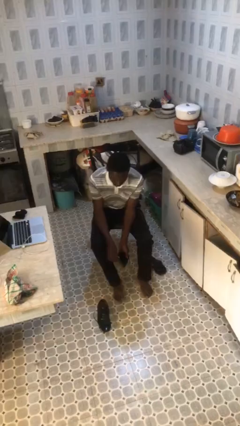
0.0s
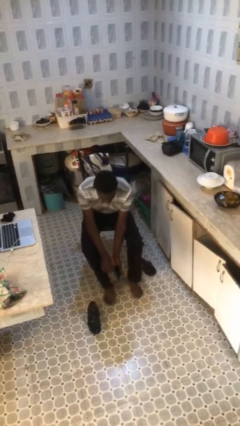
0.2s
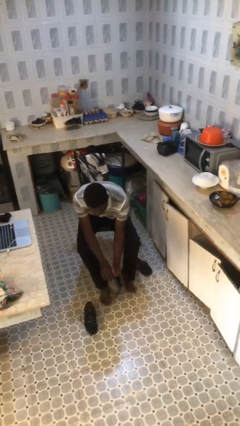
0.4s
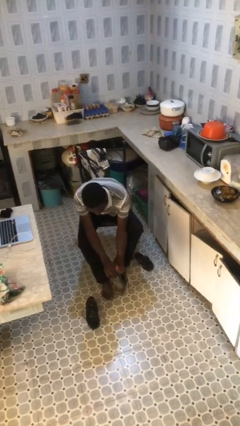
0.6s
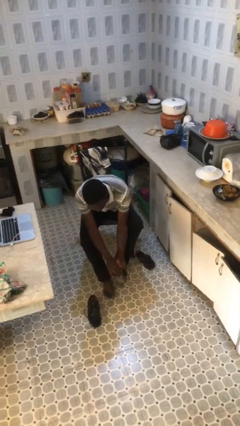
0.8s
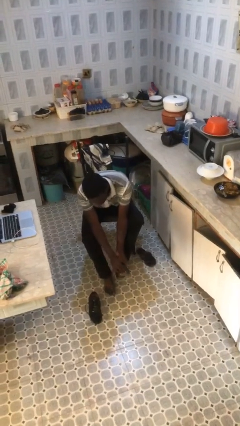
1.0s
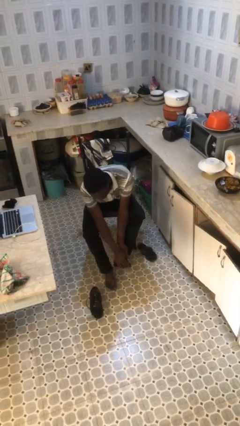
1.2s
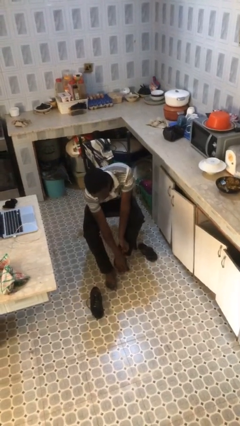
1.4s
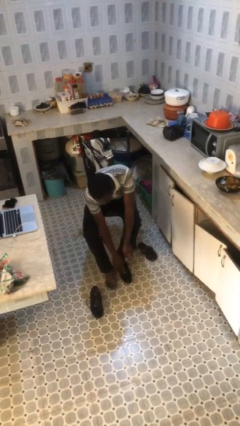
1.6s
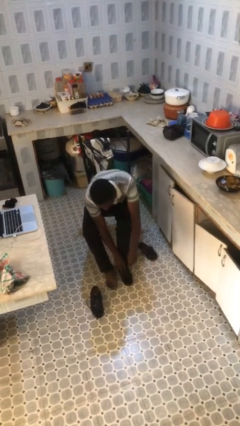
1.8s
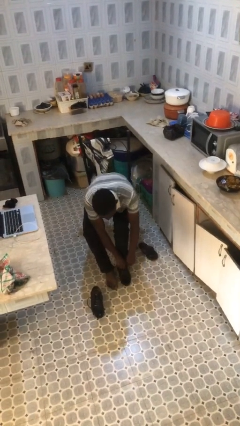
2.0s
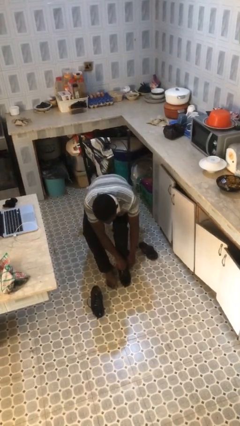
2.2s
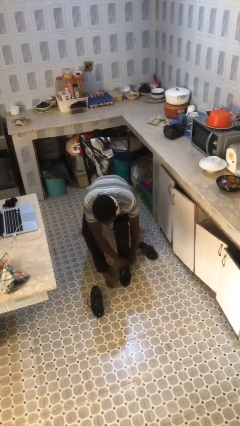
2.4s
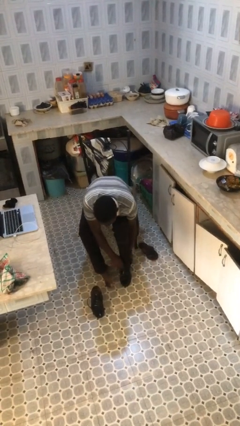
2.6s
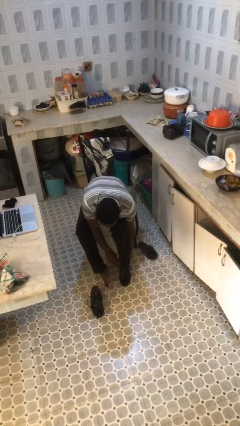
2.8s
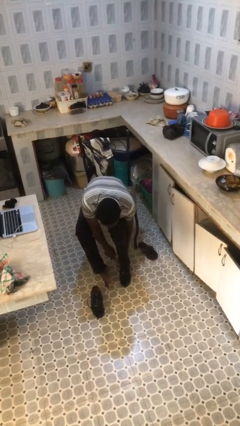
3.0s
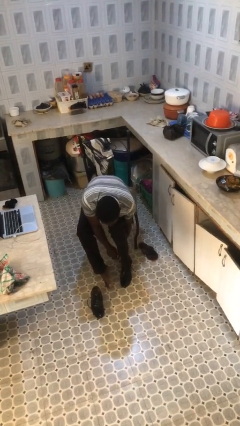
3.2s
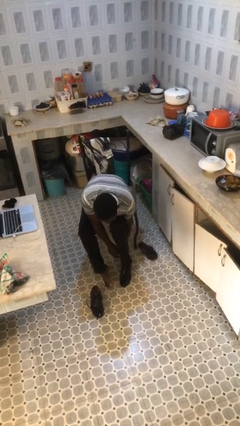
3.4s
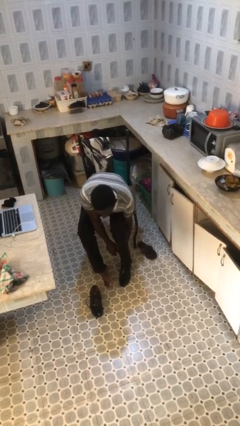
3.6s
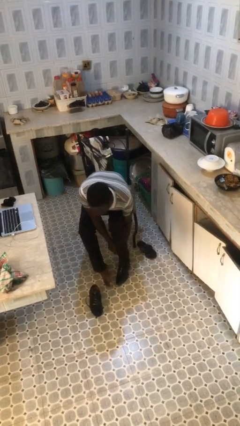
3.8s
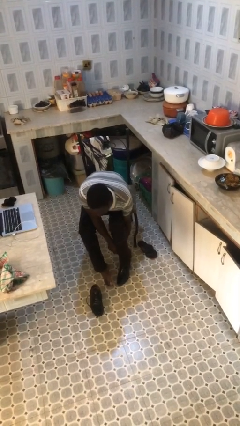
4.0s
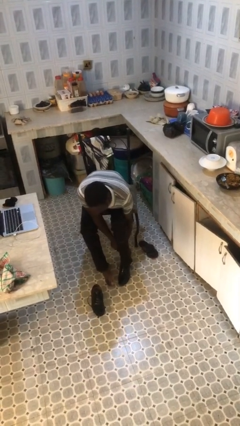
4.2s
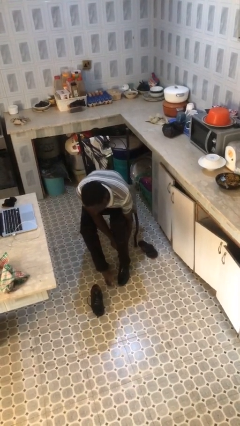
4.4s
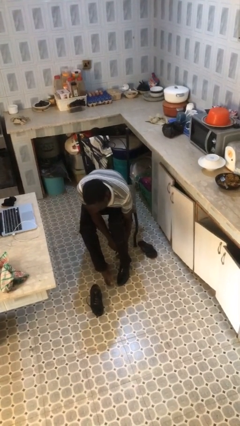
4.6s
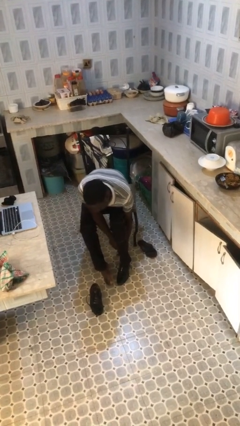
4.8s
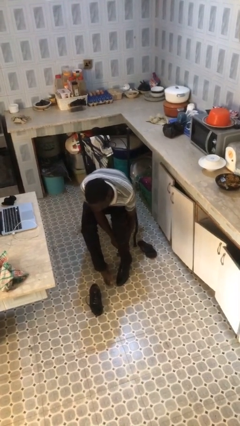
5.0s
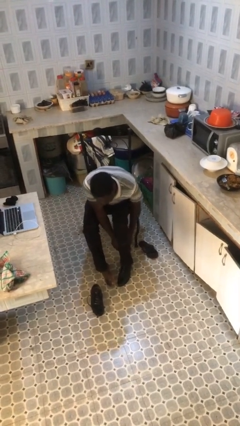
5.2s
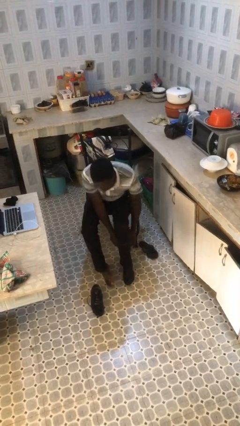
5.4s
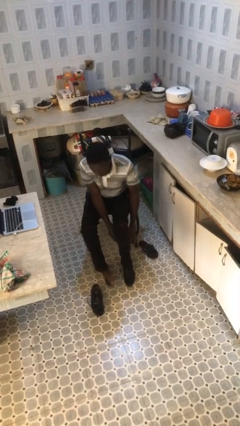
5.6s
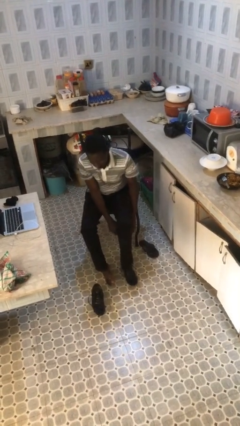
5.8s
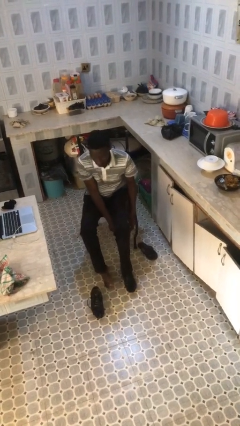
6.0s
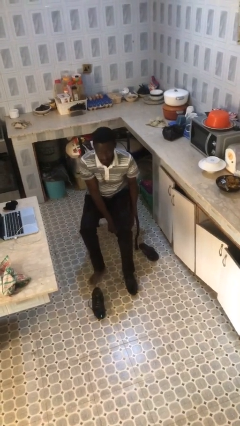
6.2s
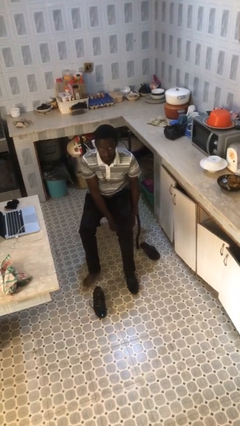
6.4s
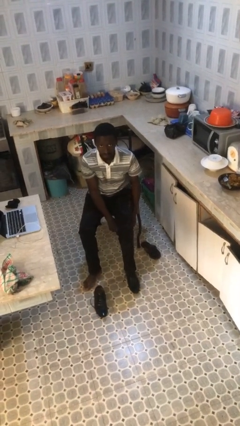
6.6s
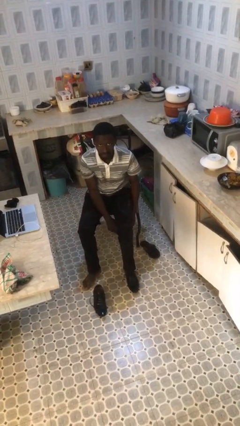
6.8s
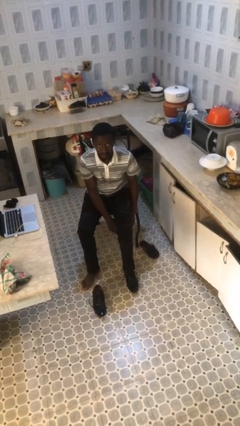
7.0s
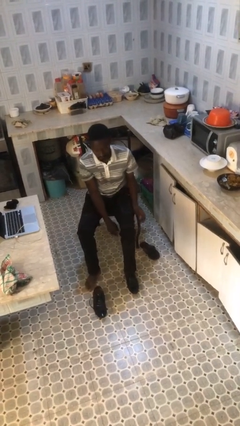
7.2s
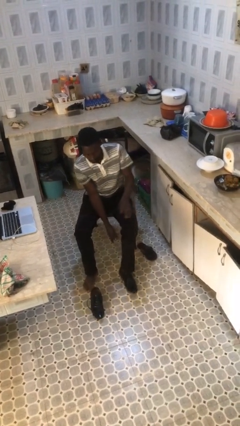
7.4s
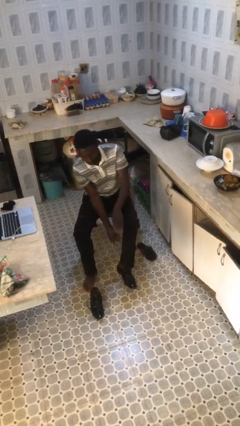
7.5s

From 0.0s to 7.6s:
person puts on shoes

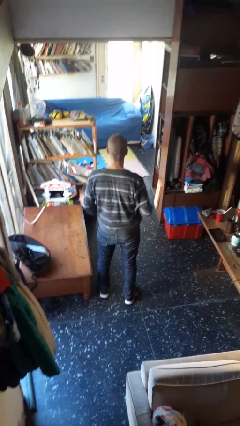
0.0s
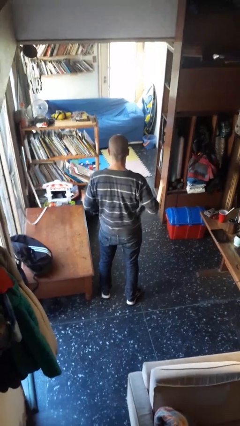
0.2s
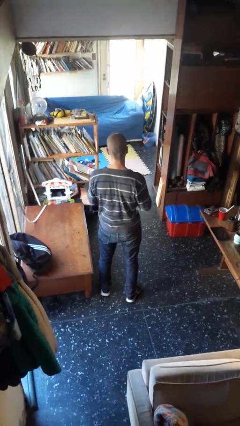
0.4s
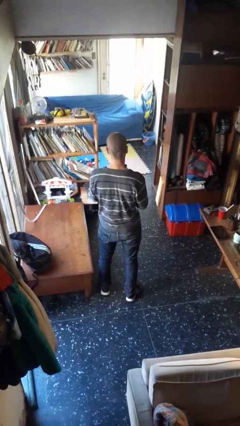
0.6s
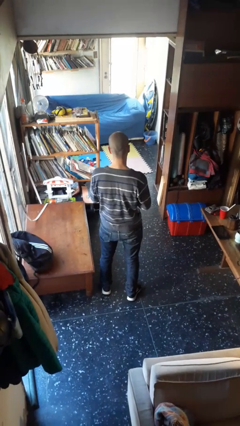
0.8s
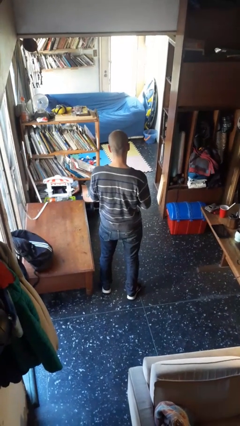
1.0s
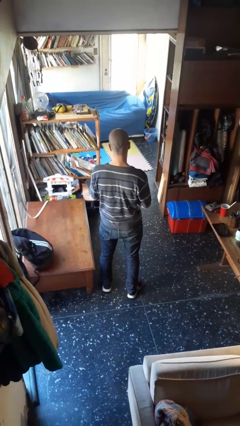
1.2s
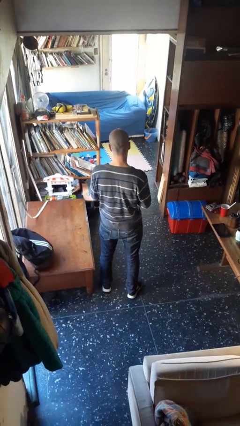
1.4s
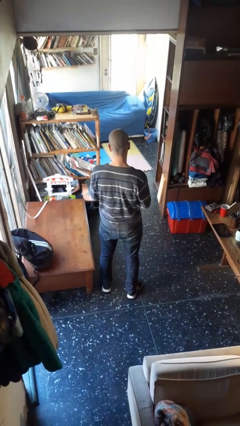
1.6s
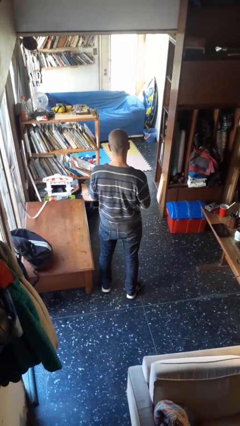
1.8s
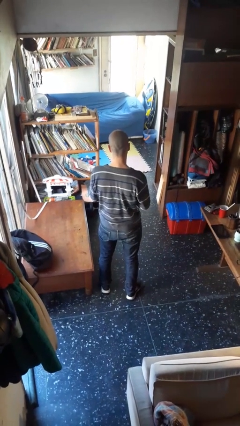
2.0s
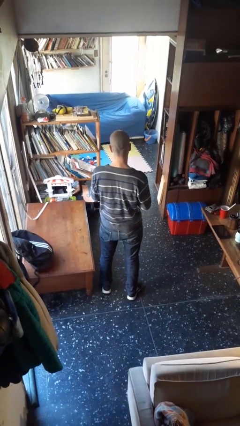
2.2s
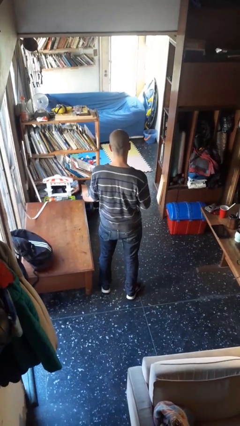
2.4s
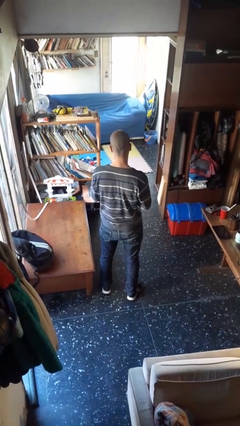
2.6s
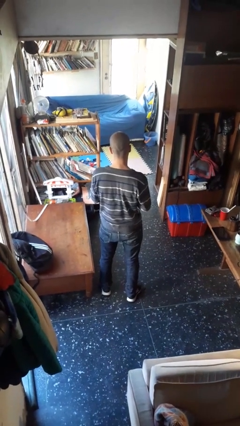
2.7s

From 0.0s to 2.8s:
person takes phone from pocket

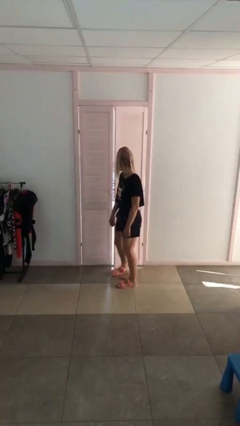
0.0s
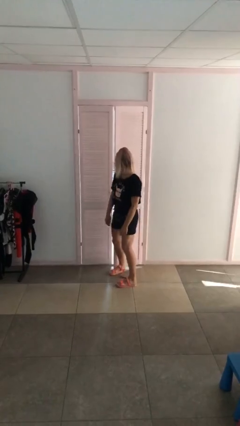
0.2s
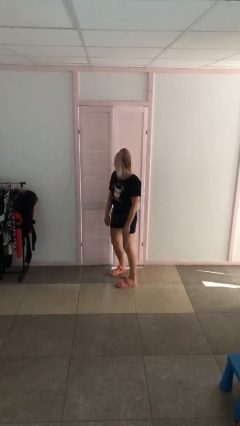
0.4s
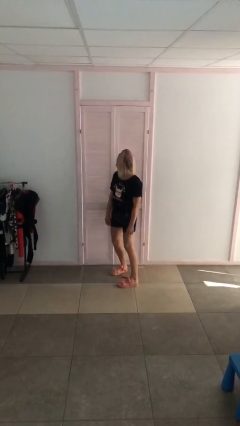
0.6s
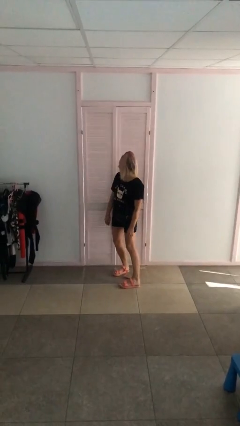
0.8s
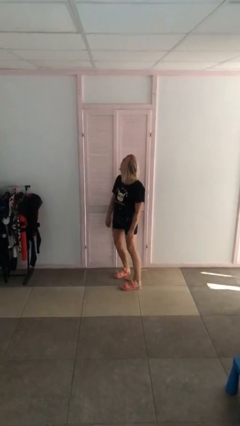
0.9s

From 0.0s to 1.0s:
person closes door with hip

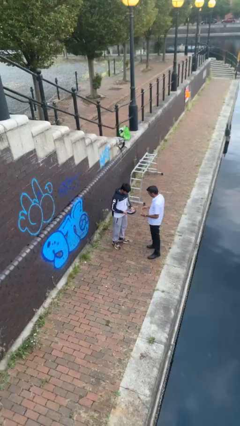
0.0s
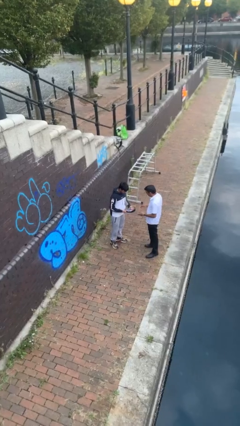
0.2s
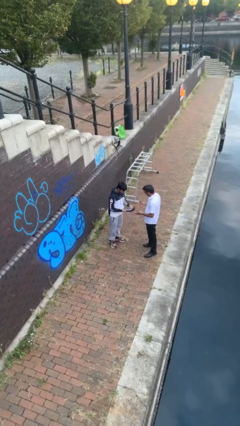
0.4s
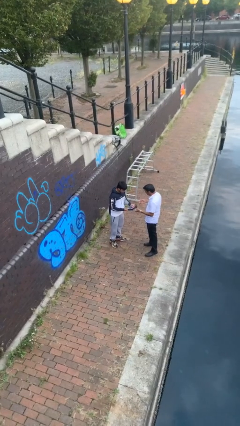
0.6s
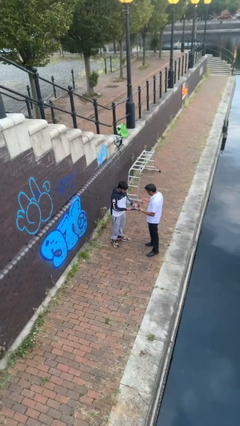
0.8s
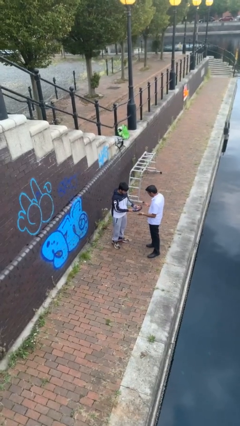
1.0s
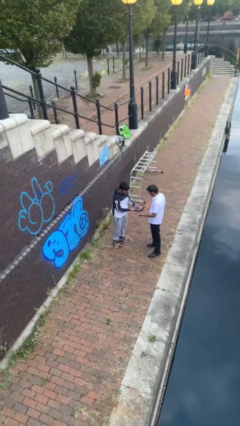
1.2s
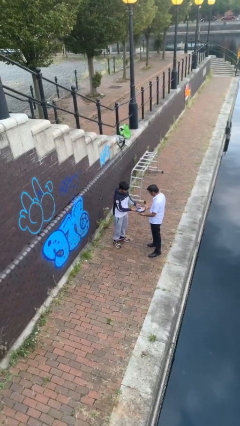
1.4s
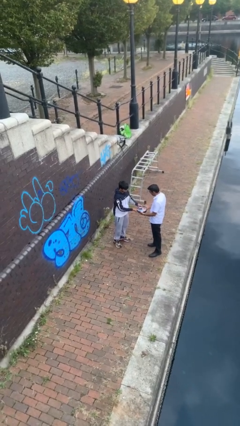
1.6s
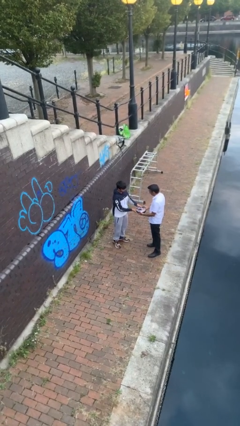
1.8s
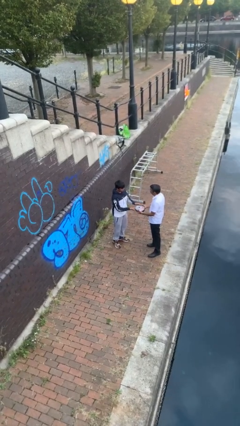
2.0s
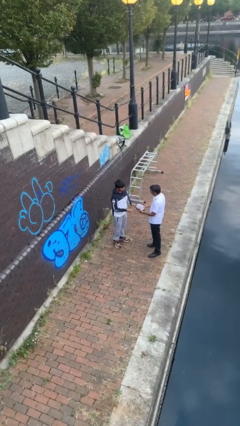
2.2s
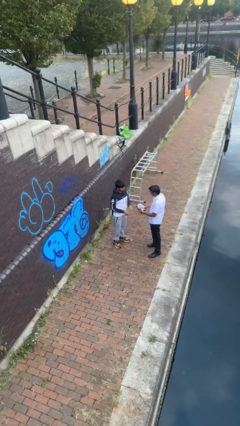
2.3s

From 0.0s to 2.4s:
person transfers object to person

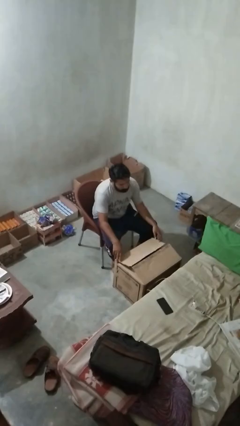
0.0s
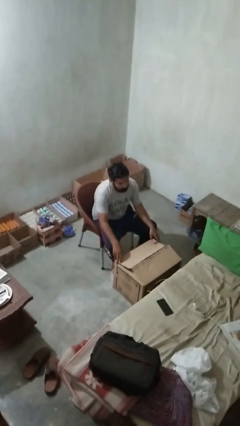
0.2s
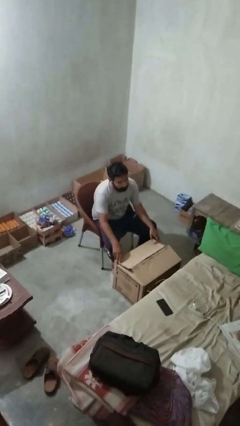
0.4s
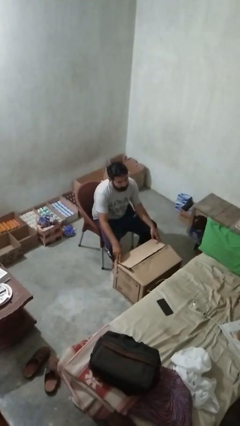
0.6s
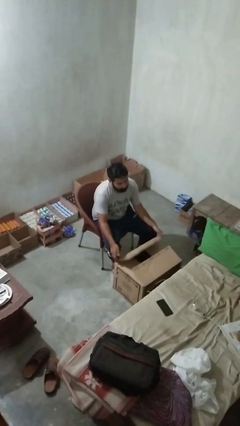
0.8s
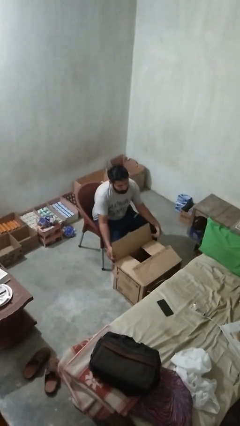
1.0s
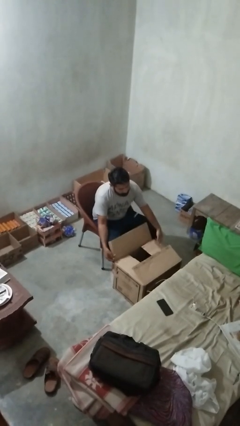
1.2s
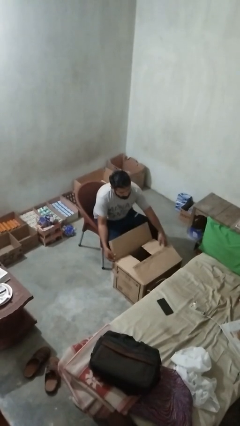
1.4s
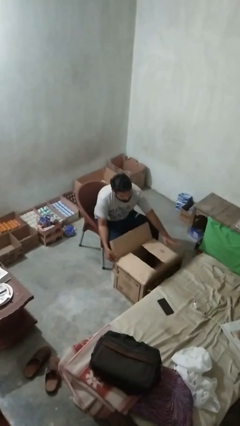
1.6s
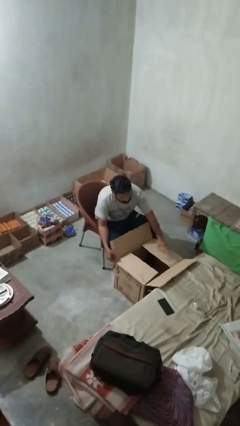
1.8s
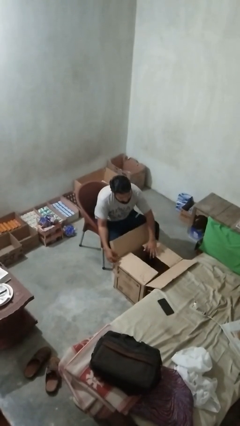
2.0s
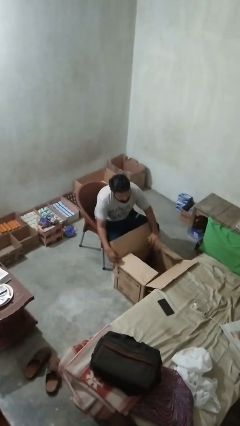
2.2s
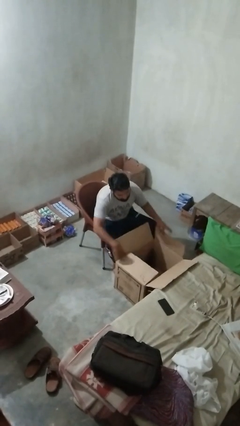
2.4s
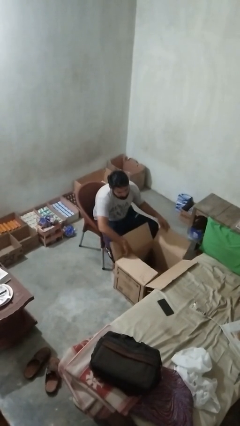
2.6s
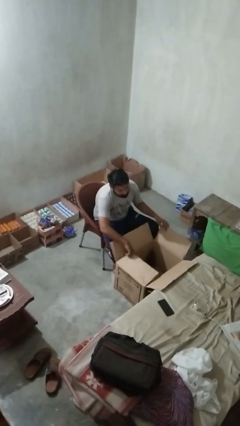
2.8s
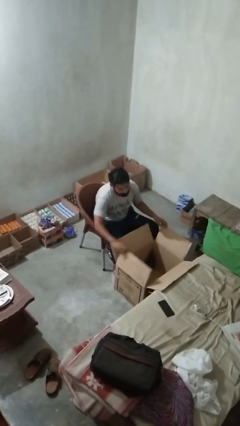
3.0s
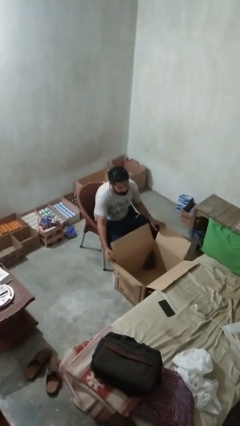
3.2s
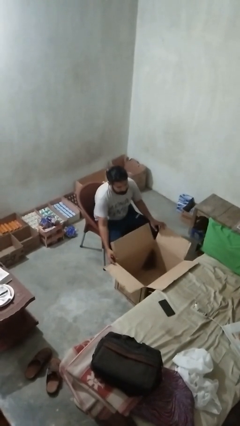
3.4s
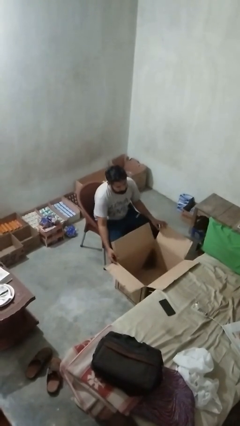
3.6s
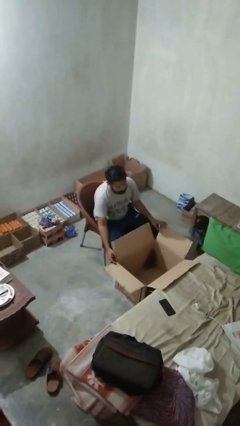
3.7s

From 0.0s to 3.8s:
person opens box

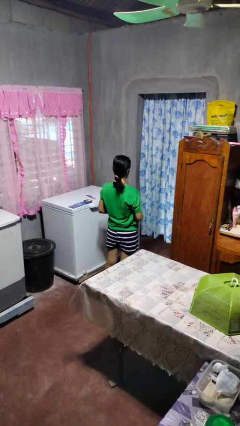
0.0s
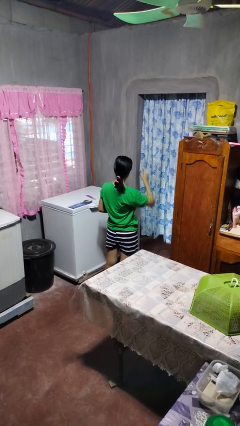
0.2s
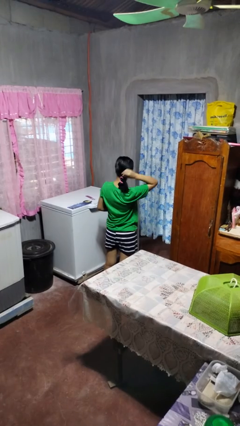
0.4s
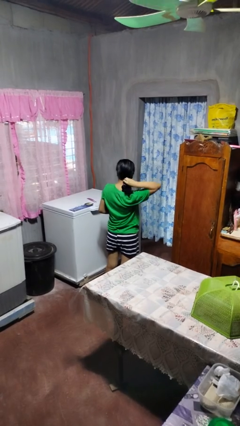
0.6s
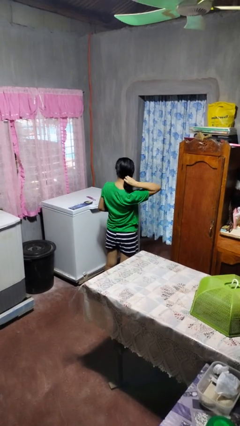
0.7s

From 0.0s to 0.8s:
person takes off hairtie
